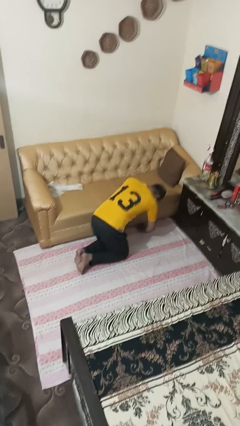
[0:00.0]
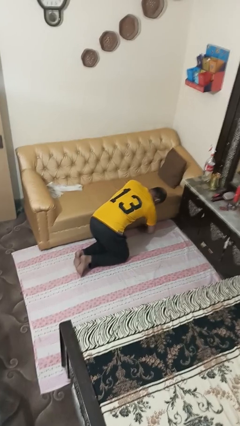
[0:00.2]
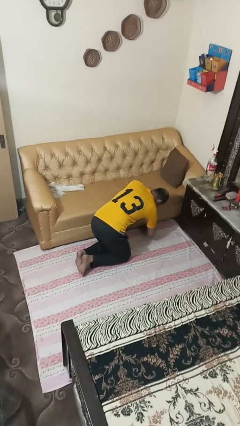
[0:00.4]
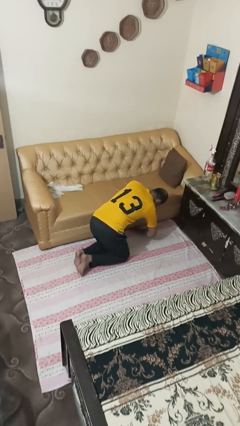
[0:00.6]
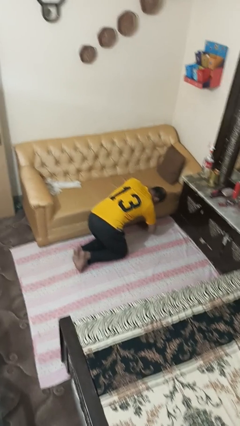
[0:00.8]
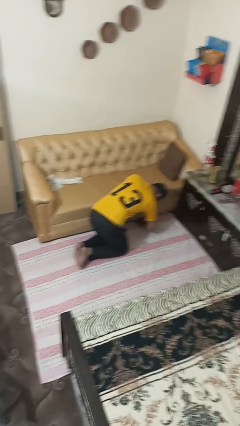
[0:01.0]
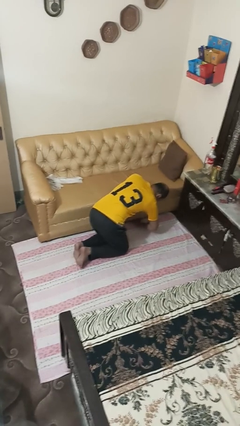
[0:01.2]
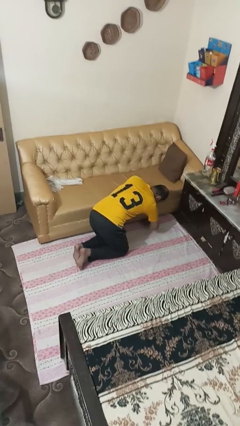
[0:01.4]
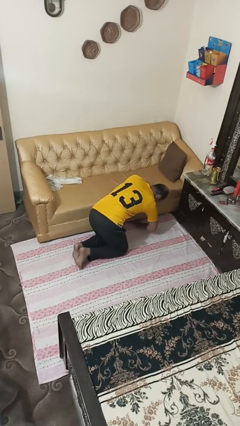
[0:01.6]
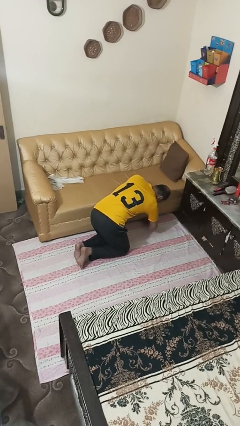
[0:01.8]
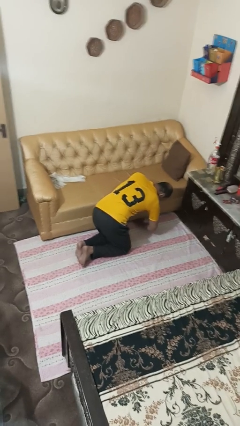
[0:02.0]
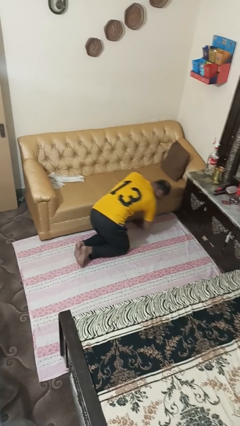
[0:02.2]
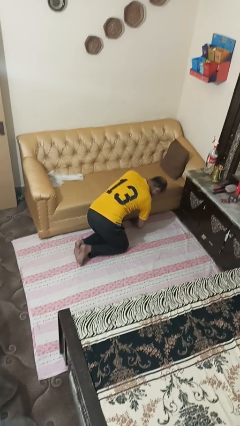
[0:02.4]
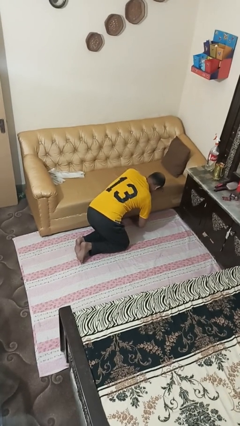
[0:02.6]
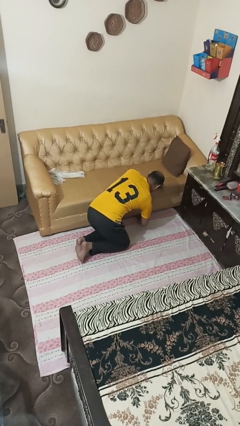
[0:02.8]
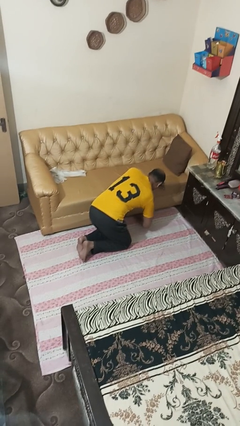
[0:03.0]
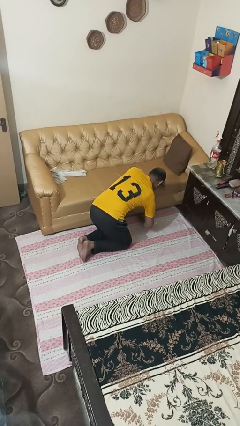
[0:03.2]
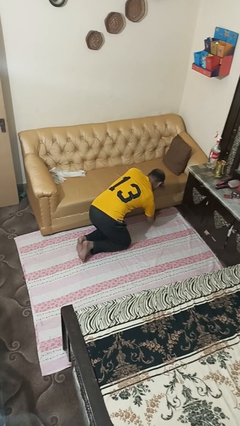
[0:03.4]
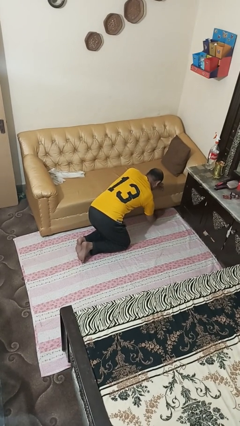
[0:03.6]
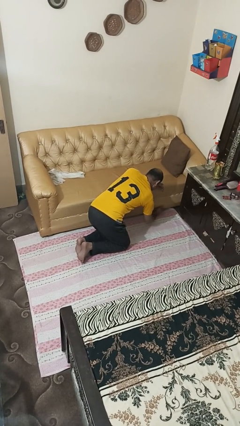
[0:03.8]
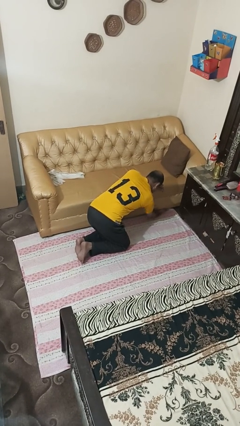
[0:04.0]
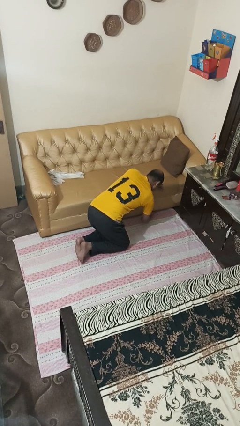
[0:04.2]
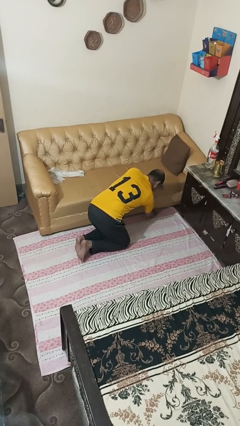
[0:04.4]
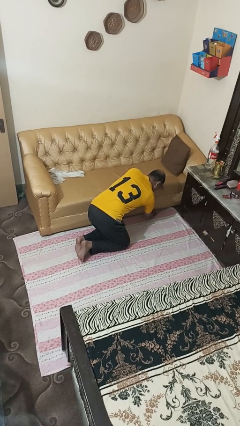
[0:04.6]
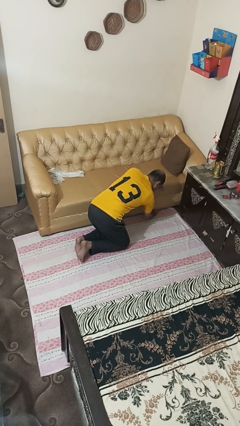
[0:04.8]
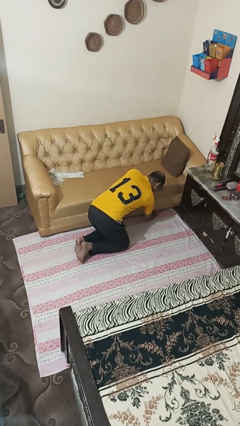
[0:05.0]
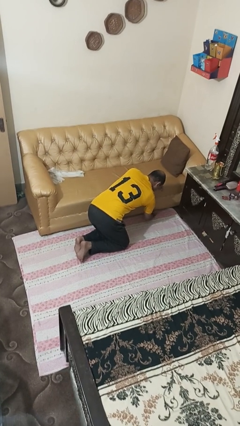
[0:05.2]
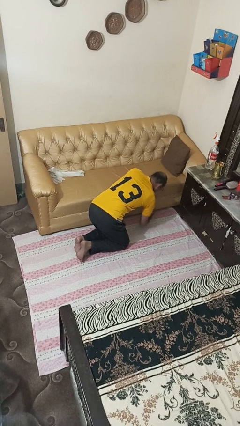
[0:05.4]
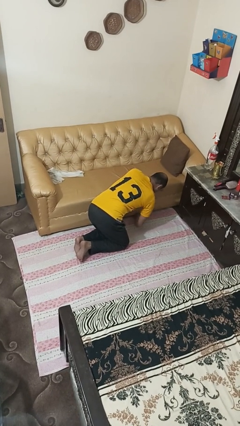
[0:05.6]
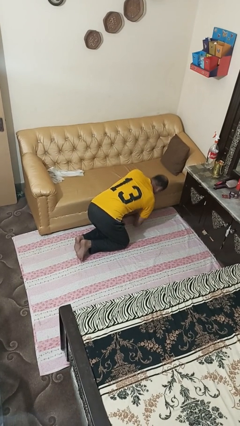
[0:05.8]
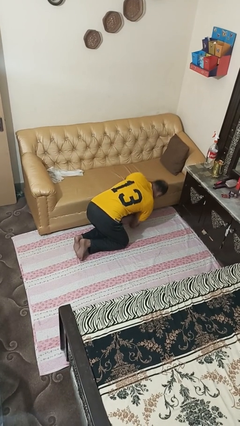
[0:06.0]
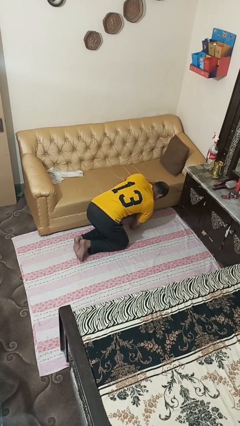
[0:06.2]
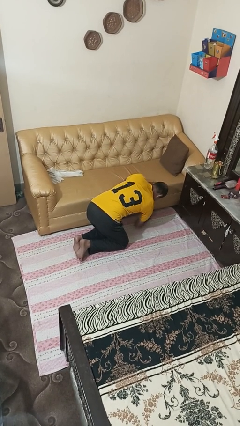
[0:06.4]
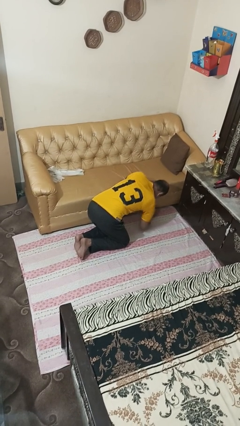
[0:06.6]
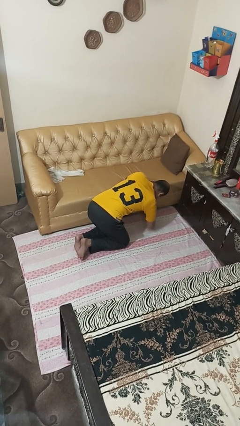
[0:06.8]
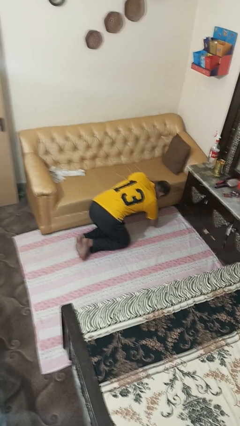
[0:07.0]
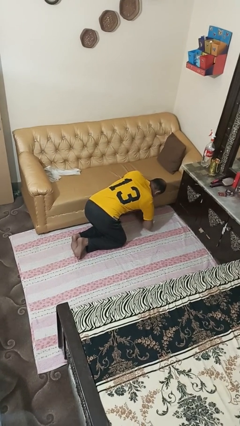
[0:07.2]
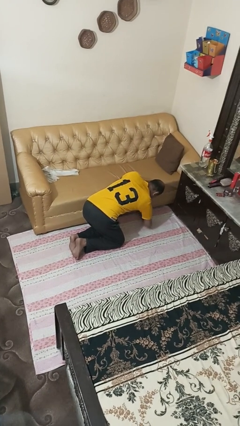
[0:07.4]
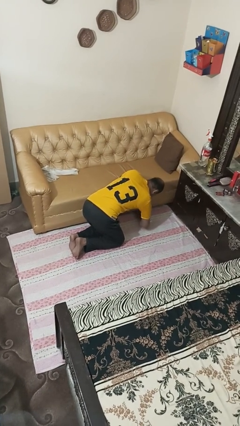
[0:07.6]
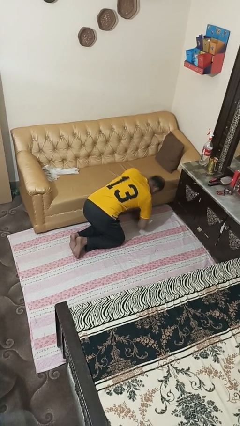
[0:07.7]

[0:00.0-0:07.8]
person searches under couch

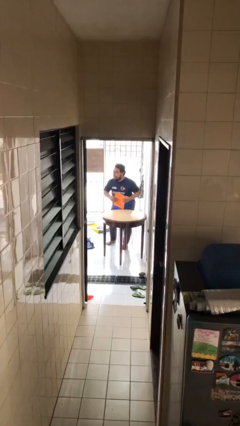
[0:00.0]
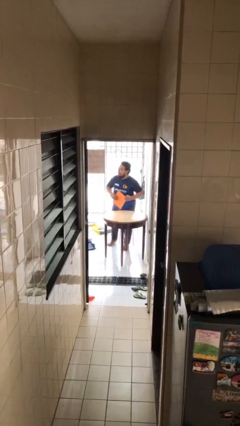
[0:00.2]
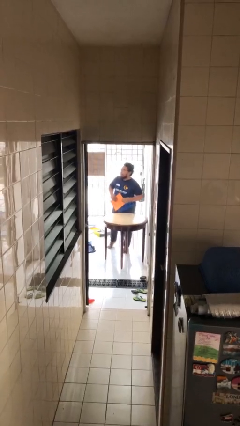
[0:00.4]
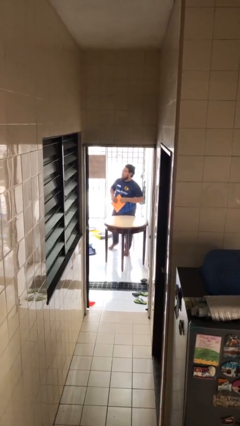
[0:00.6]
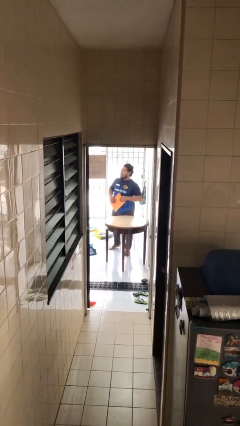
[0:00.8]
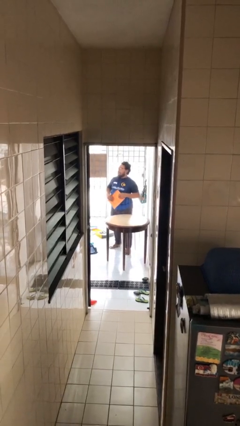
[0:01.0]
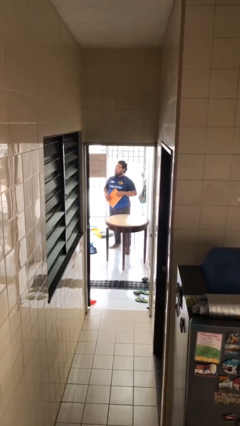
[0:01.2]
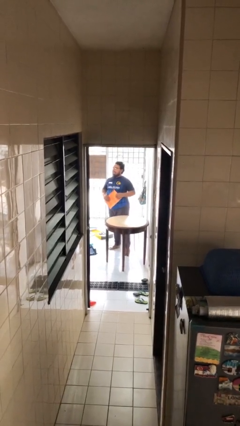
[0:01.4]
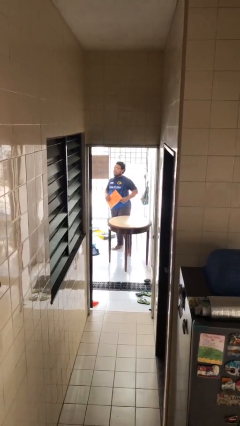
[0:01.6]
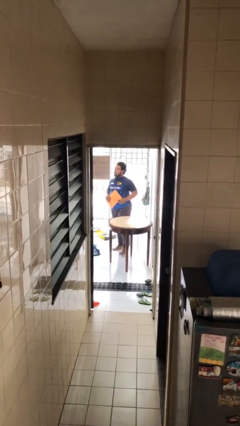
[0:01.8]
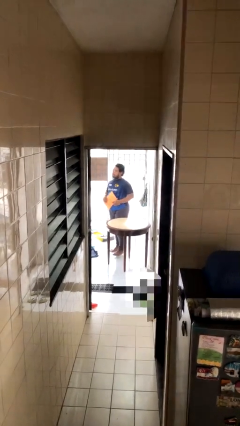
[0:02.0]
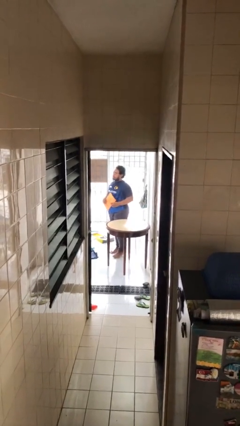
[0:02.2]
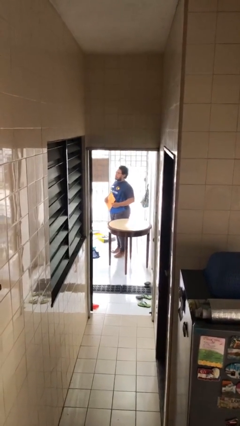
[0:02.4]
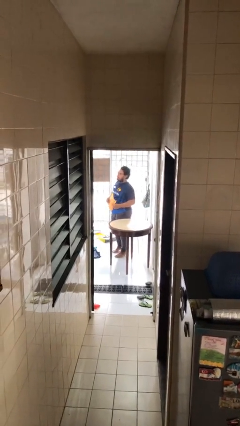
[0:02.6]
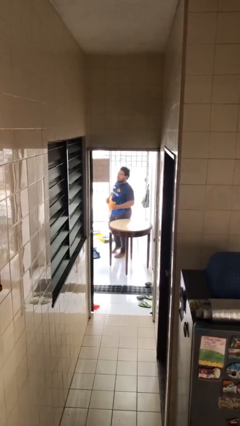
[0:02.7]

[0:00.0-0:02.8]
person stands up

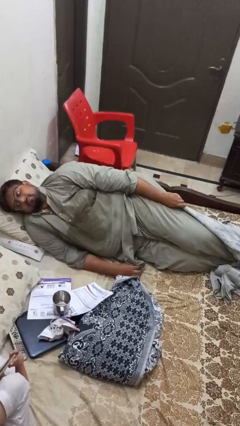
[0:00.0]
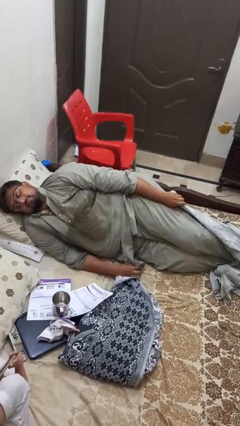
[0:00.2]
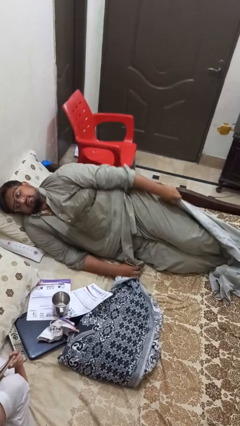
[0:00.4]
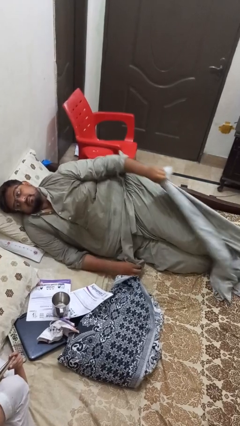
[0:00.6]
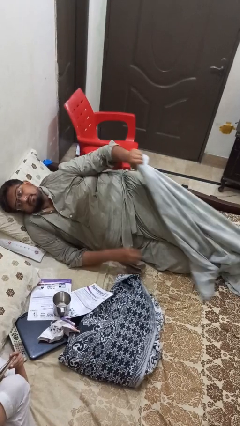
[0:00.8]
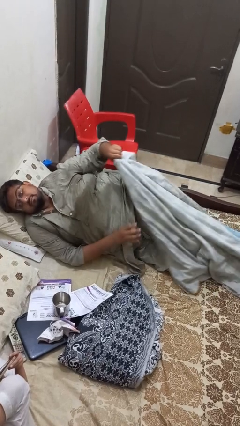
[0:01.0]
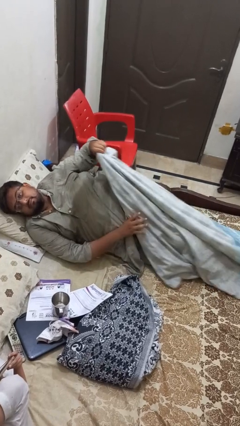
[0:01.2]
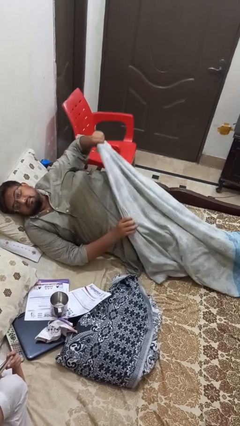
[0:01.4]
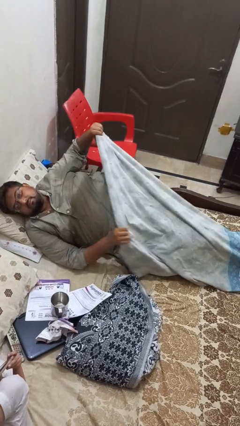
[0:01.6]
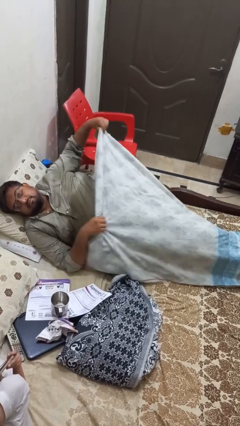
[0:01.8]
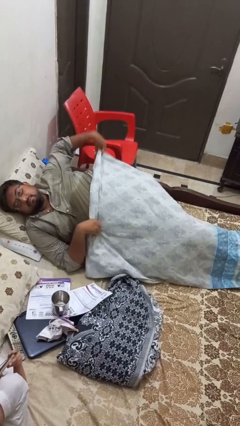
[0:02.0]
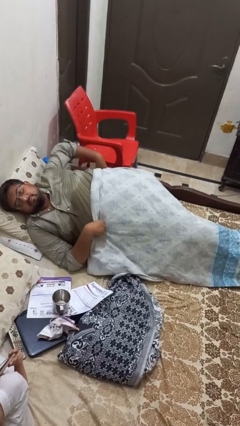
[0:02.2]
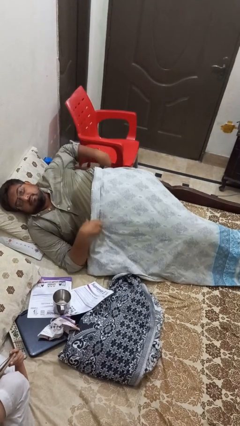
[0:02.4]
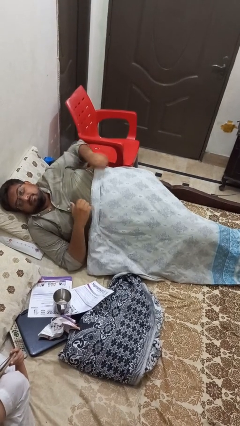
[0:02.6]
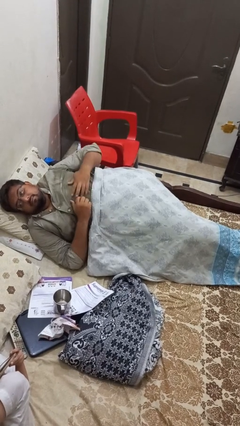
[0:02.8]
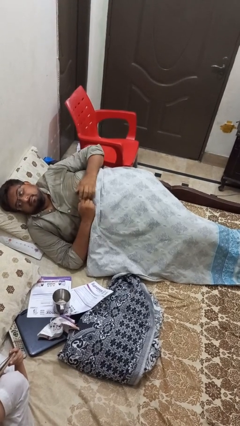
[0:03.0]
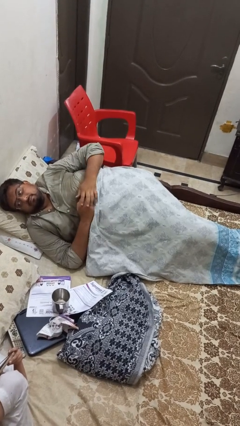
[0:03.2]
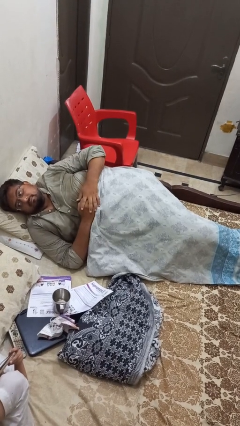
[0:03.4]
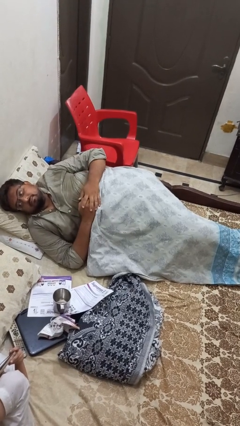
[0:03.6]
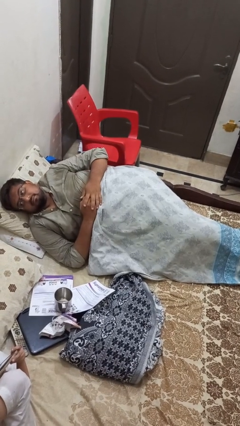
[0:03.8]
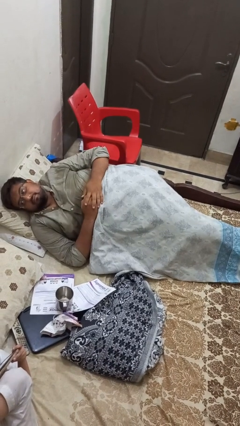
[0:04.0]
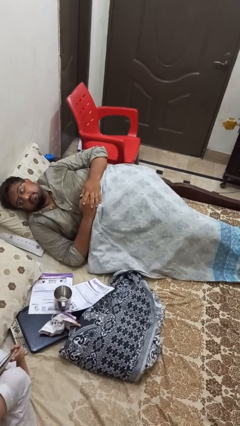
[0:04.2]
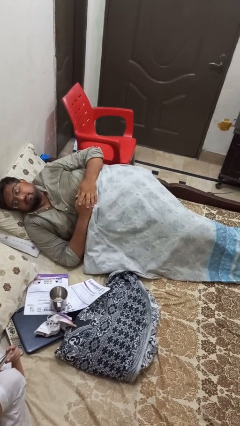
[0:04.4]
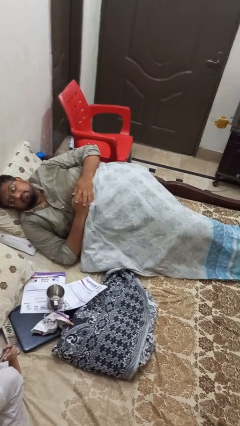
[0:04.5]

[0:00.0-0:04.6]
person covers with bedsheets

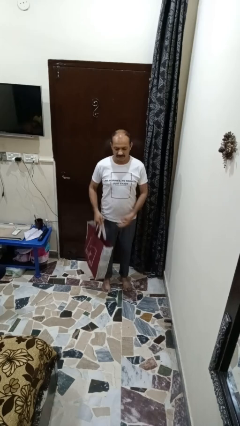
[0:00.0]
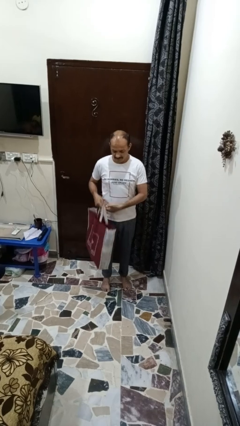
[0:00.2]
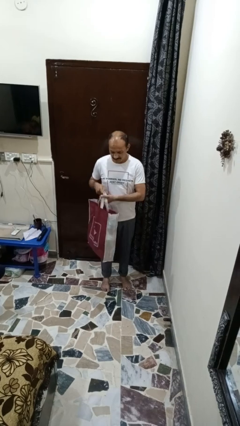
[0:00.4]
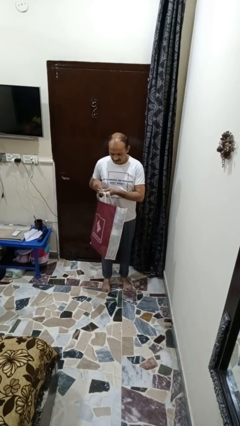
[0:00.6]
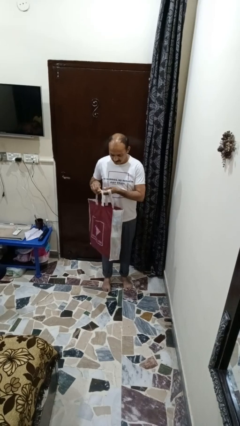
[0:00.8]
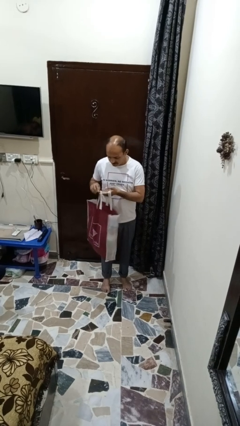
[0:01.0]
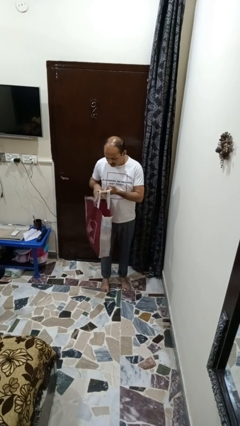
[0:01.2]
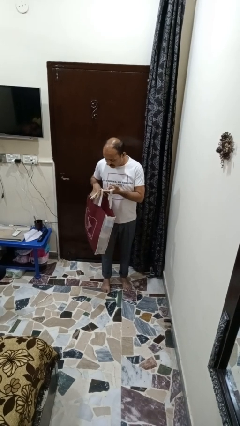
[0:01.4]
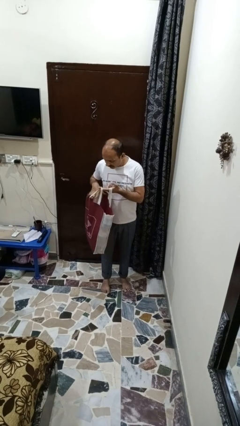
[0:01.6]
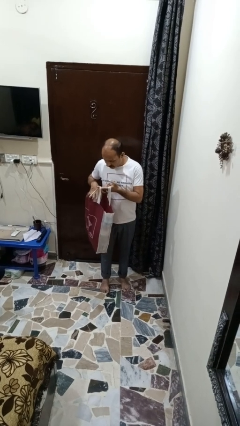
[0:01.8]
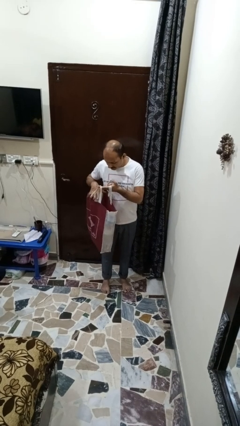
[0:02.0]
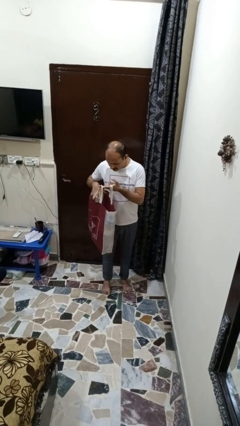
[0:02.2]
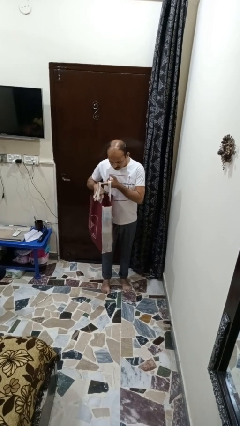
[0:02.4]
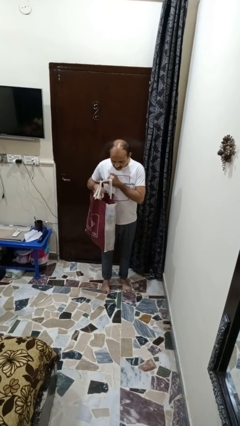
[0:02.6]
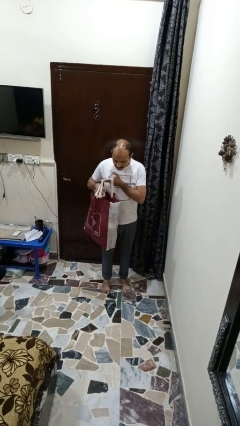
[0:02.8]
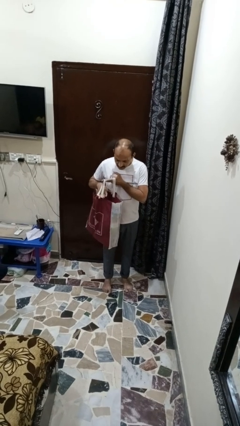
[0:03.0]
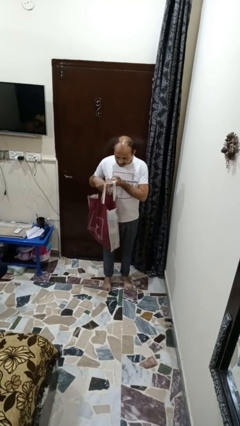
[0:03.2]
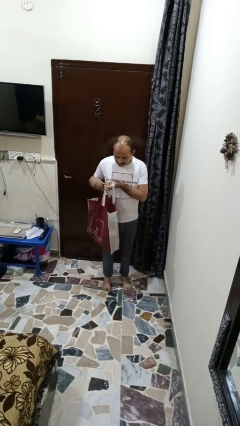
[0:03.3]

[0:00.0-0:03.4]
person searches in bag
